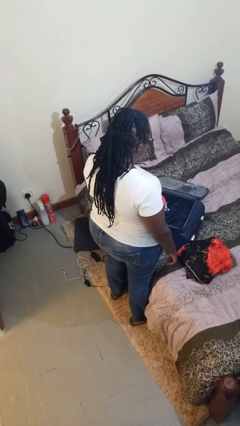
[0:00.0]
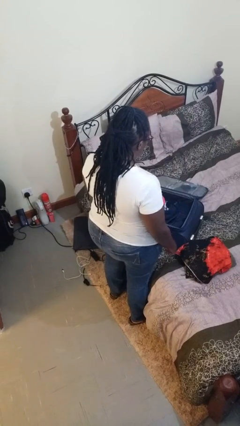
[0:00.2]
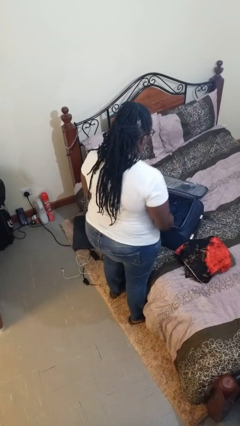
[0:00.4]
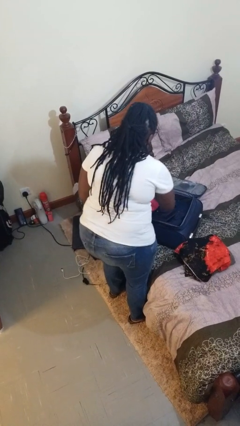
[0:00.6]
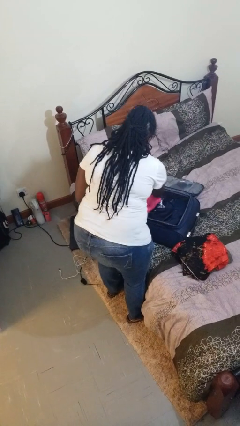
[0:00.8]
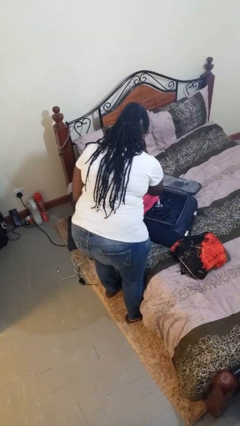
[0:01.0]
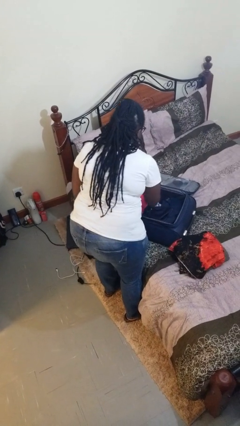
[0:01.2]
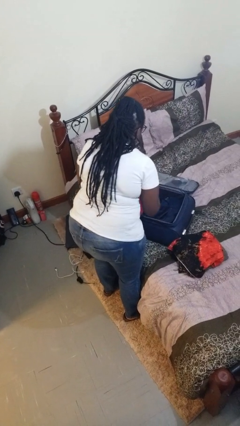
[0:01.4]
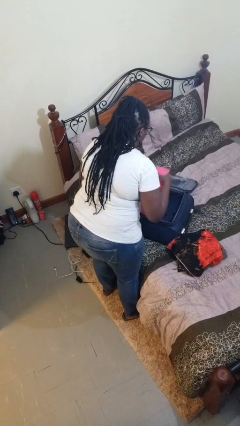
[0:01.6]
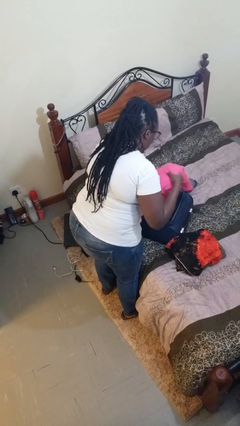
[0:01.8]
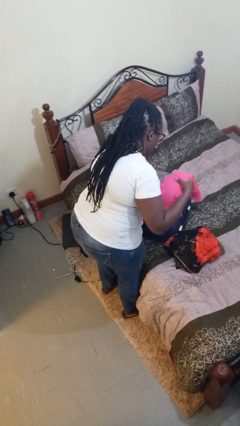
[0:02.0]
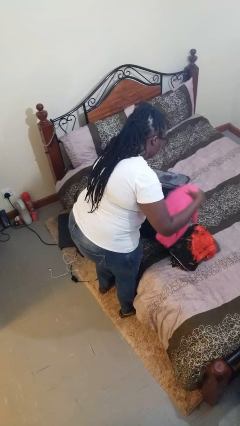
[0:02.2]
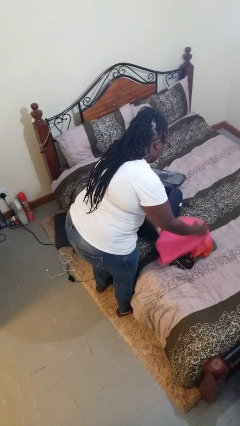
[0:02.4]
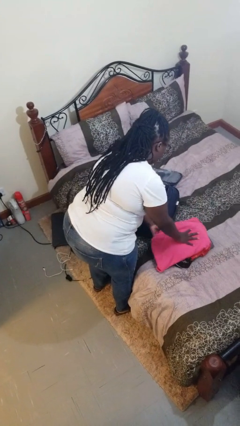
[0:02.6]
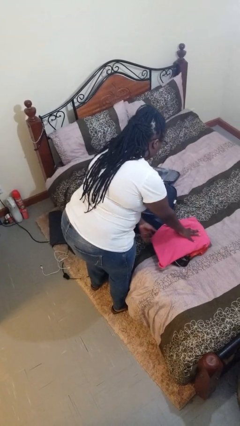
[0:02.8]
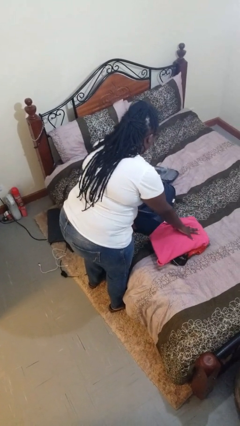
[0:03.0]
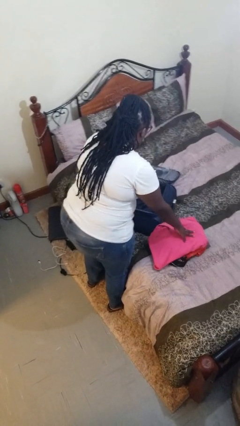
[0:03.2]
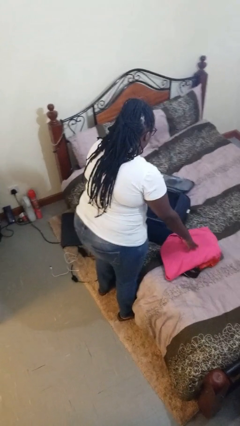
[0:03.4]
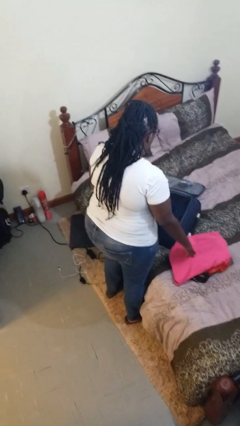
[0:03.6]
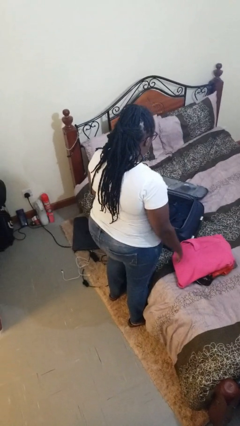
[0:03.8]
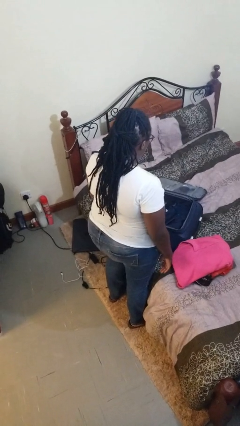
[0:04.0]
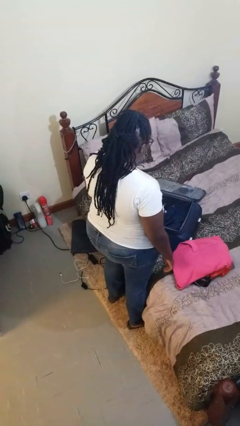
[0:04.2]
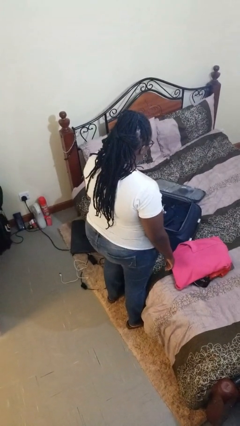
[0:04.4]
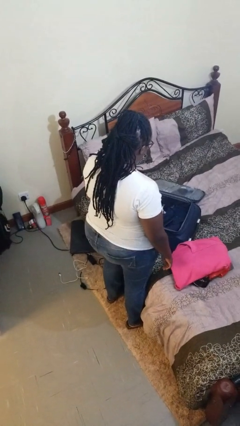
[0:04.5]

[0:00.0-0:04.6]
person unloads clothes from suitcase

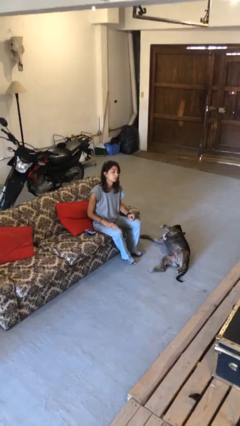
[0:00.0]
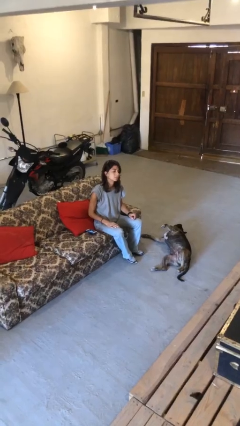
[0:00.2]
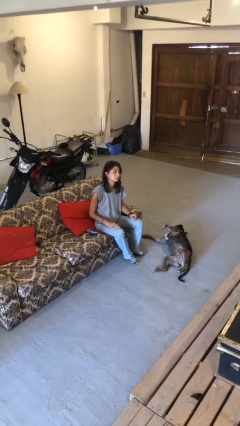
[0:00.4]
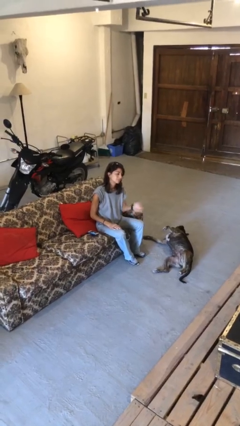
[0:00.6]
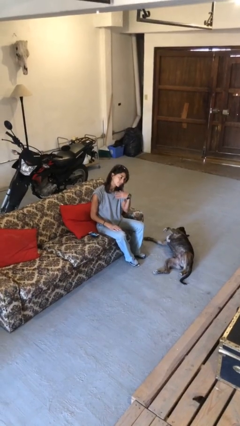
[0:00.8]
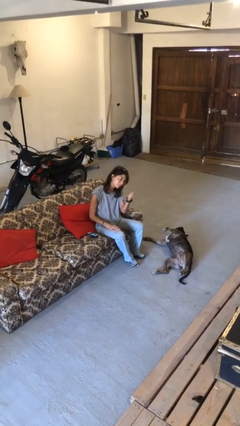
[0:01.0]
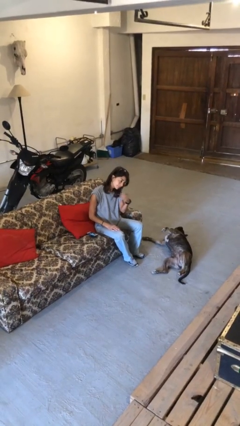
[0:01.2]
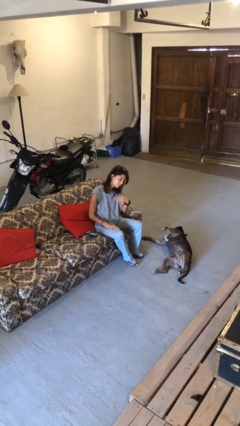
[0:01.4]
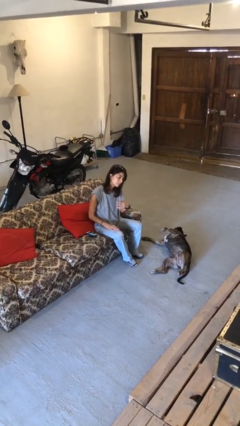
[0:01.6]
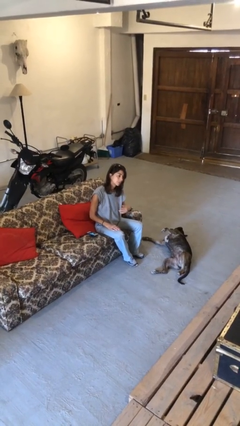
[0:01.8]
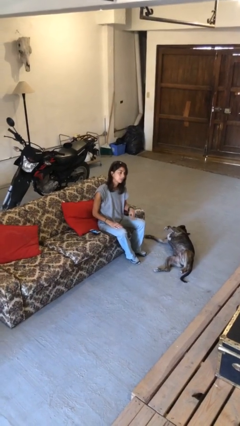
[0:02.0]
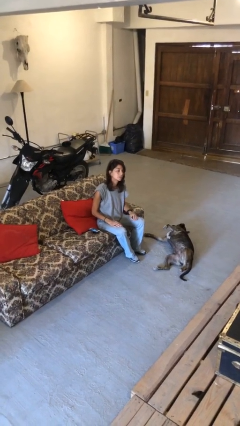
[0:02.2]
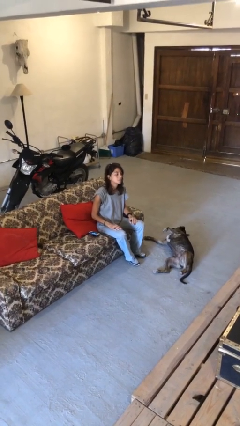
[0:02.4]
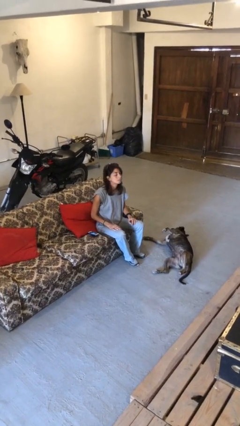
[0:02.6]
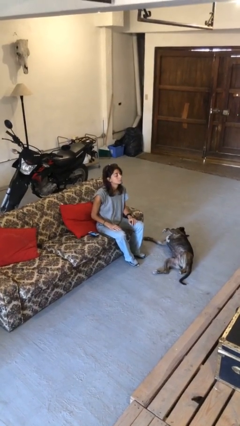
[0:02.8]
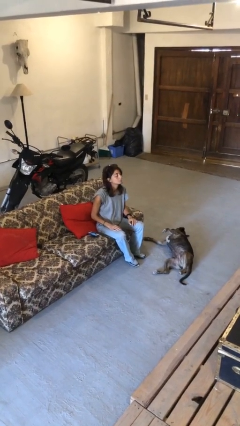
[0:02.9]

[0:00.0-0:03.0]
person gestures come here

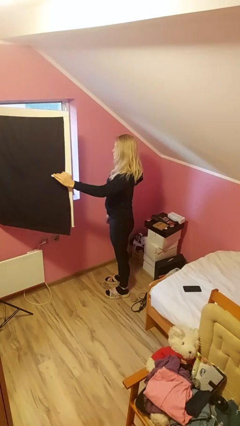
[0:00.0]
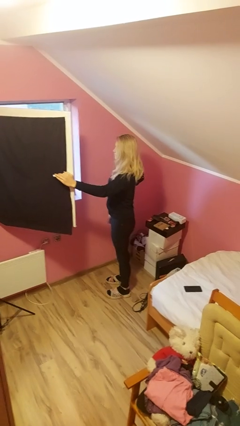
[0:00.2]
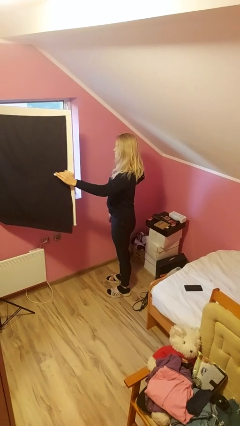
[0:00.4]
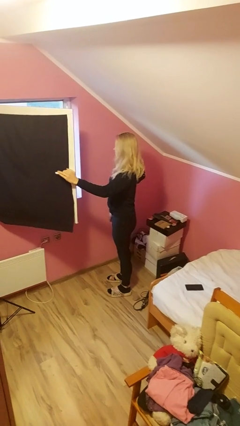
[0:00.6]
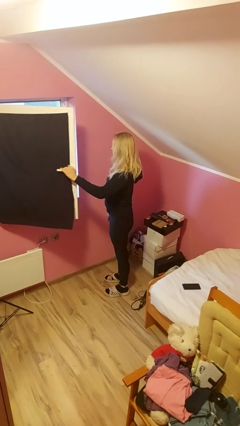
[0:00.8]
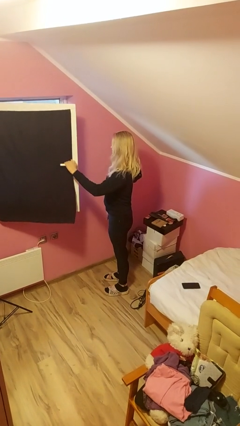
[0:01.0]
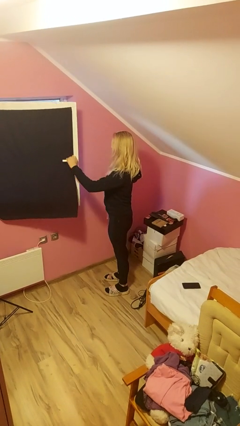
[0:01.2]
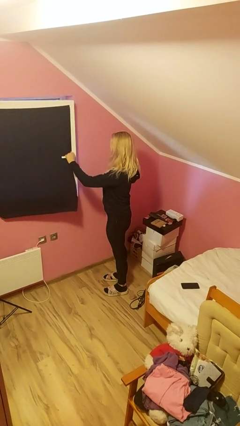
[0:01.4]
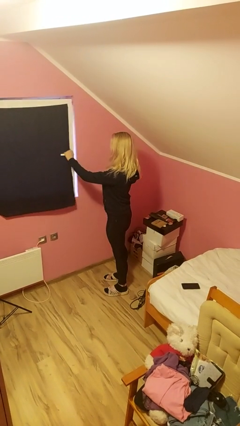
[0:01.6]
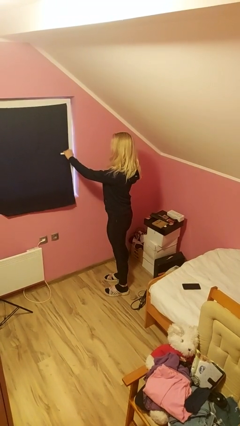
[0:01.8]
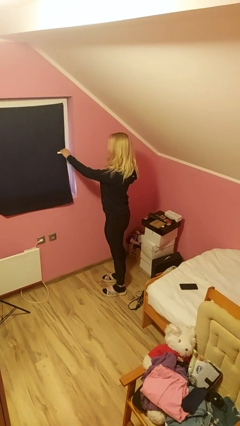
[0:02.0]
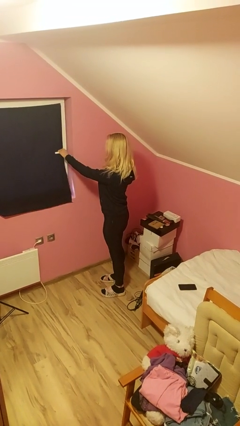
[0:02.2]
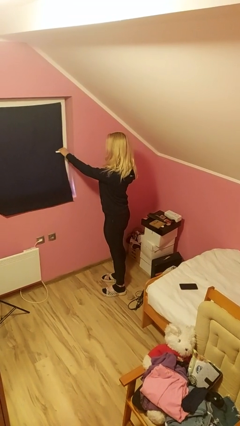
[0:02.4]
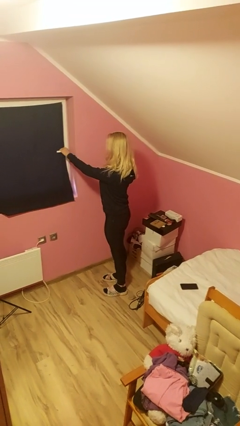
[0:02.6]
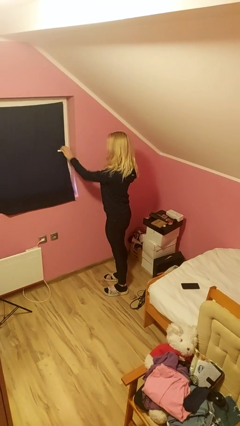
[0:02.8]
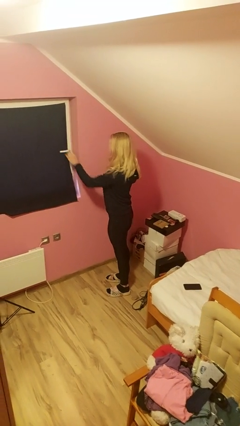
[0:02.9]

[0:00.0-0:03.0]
person closes home window

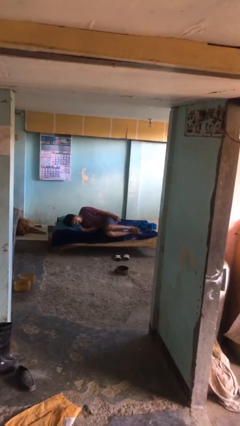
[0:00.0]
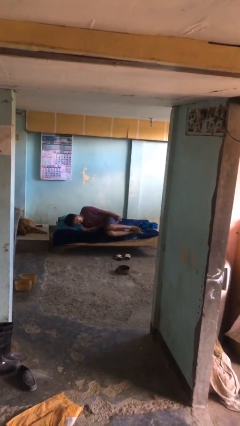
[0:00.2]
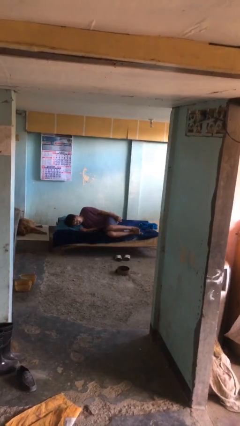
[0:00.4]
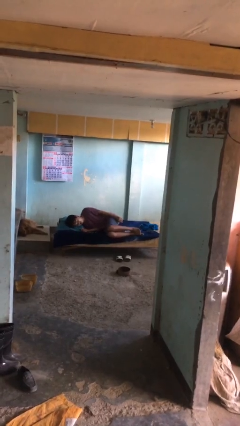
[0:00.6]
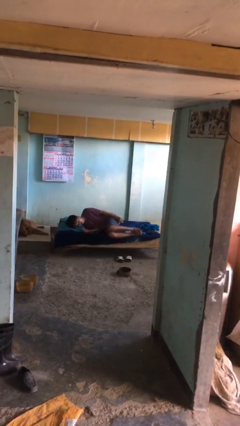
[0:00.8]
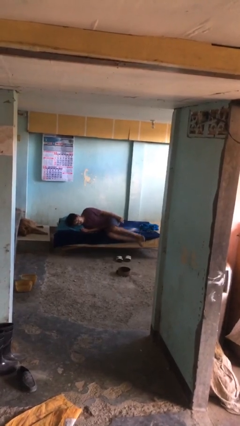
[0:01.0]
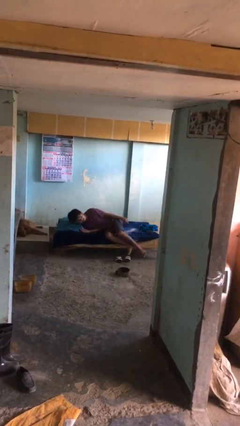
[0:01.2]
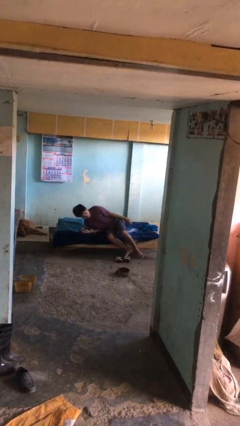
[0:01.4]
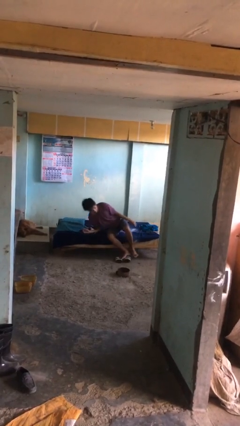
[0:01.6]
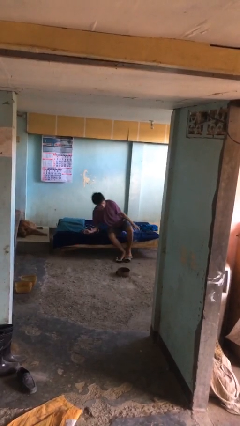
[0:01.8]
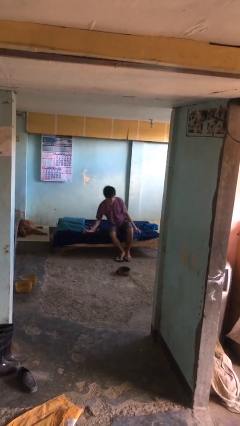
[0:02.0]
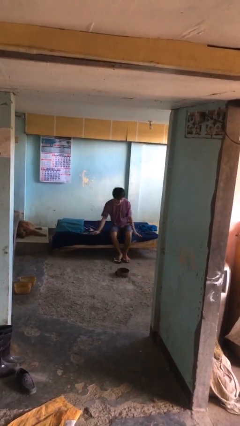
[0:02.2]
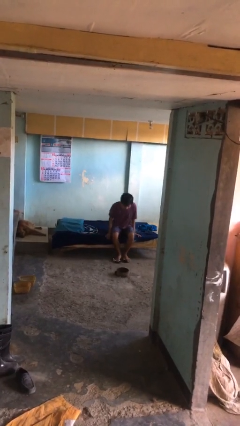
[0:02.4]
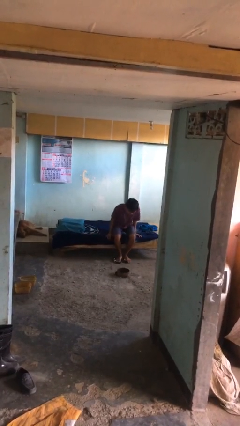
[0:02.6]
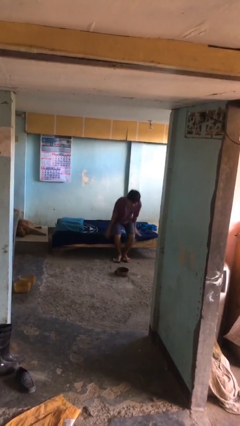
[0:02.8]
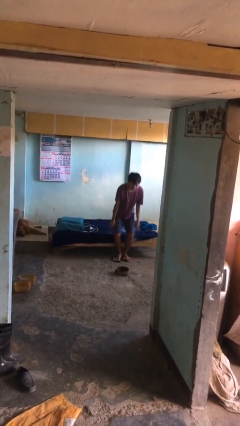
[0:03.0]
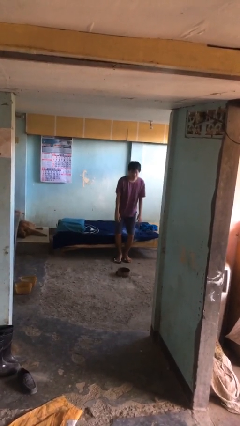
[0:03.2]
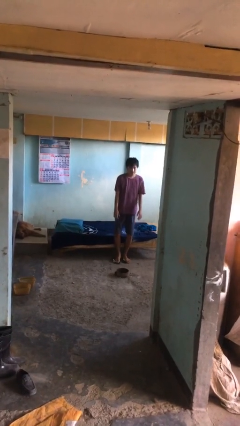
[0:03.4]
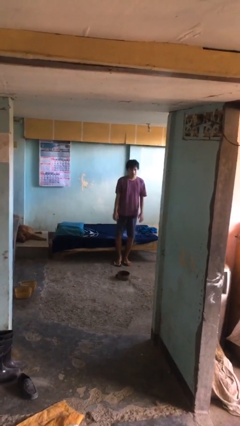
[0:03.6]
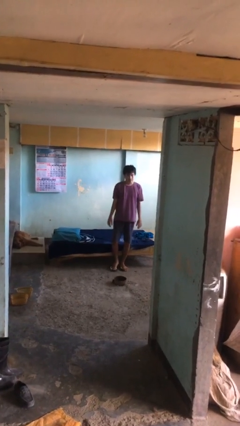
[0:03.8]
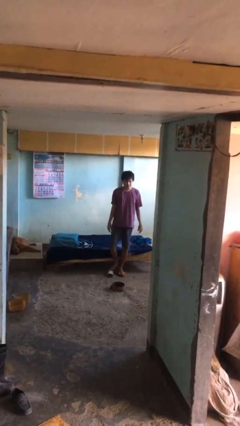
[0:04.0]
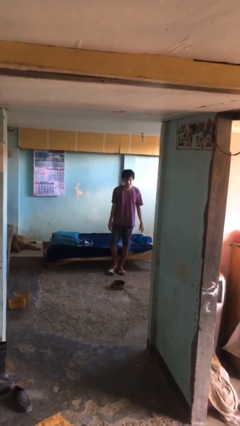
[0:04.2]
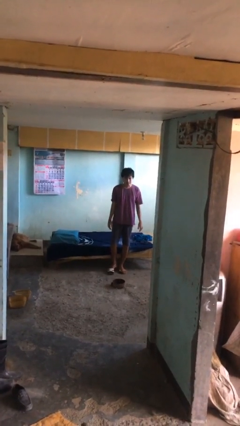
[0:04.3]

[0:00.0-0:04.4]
person stands up

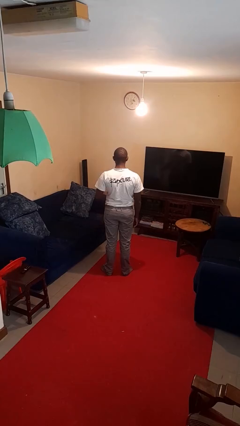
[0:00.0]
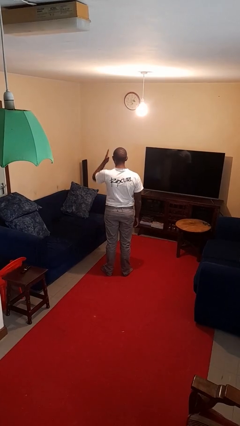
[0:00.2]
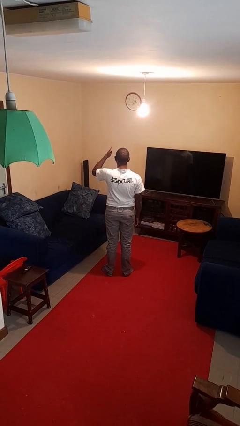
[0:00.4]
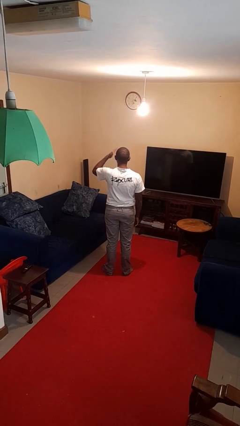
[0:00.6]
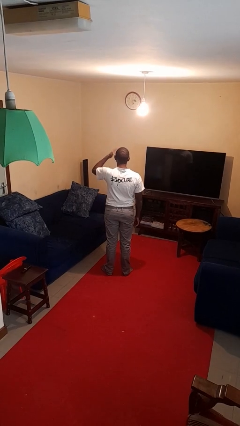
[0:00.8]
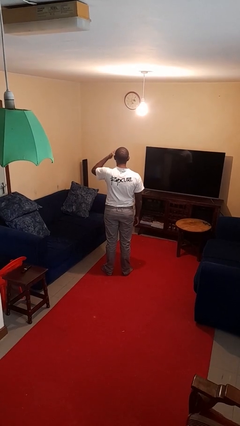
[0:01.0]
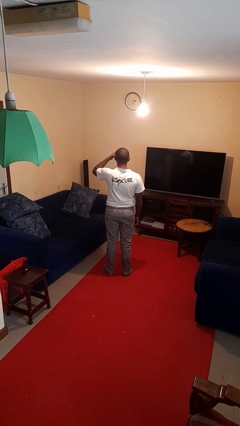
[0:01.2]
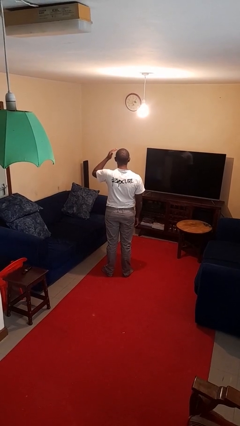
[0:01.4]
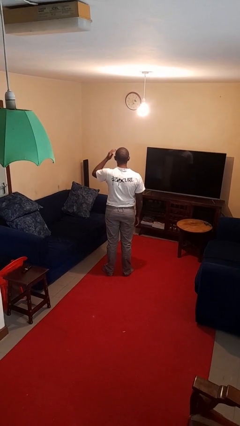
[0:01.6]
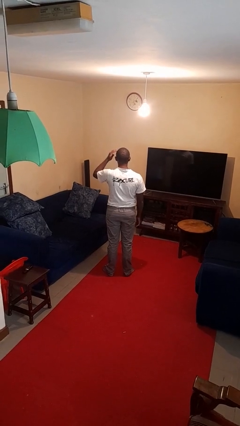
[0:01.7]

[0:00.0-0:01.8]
person swats bug

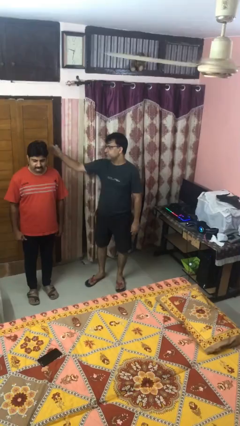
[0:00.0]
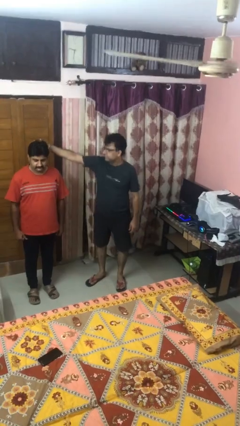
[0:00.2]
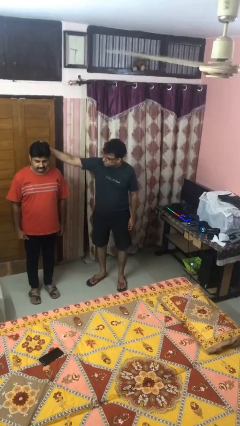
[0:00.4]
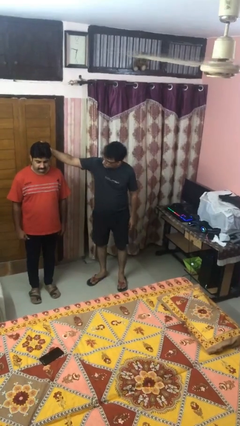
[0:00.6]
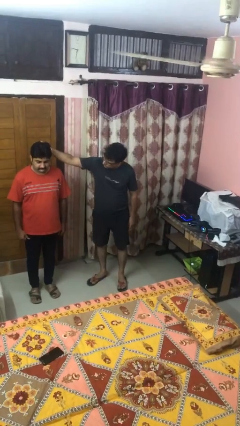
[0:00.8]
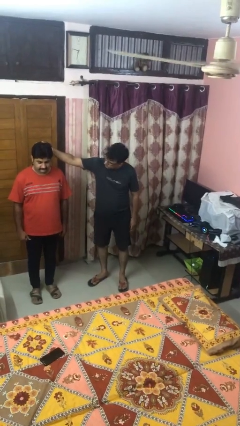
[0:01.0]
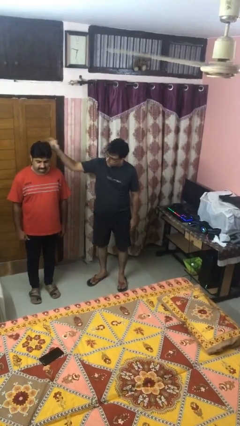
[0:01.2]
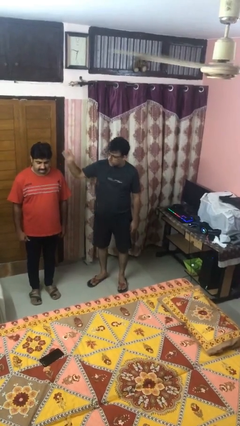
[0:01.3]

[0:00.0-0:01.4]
person grabs person by hair
